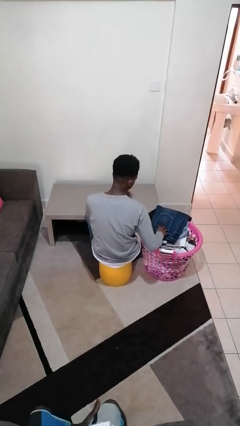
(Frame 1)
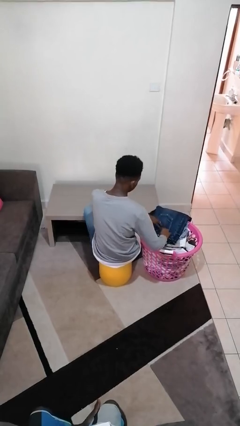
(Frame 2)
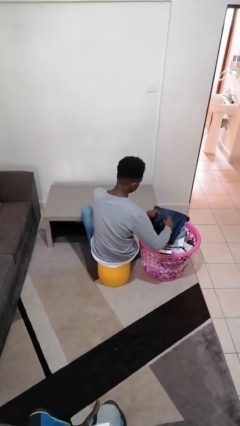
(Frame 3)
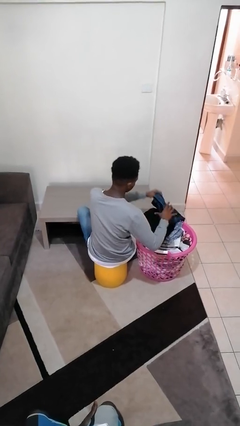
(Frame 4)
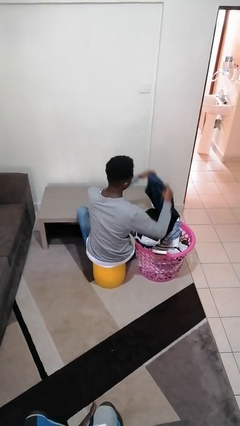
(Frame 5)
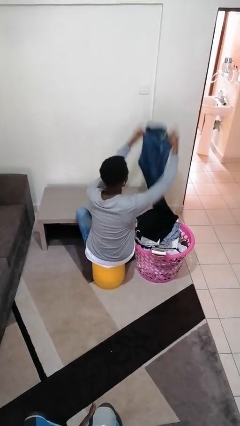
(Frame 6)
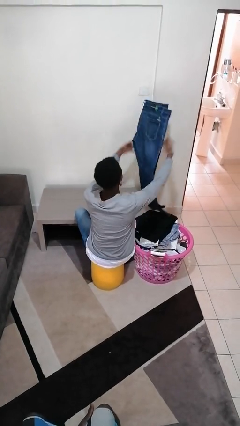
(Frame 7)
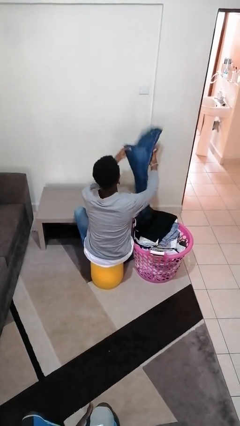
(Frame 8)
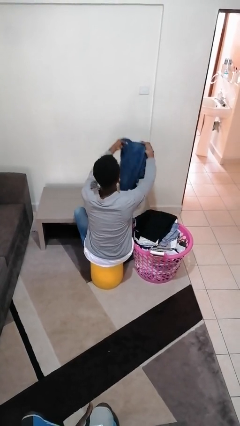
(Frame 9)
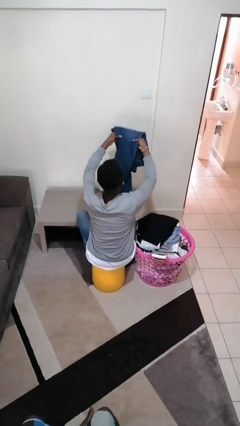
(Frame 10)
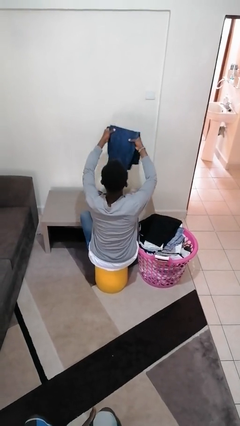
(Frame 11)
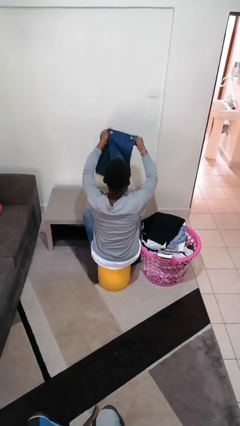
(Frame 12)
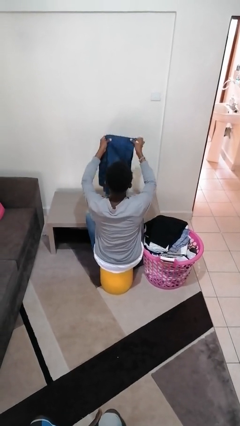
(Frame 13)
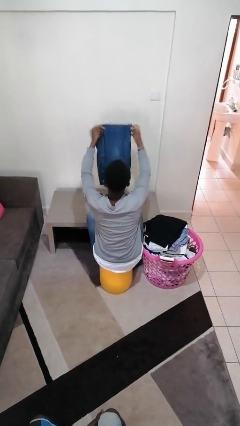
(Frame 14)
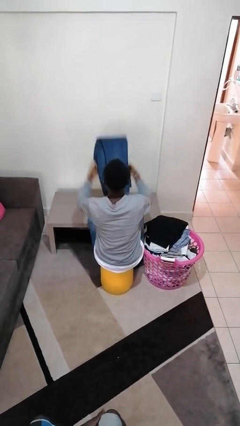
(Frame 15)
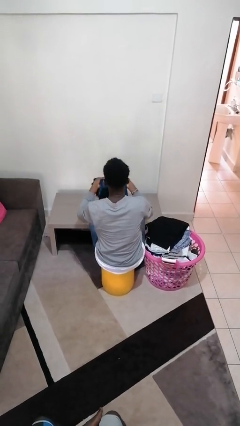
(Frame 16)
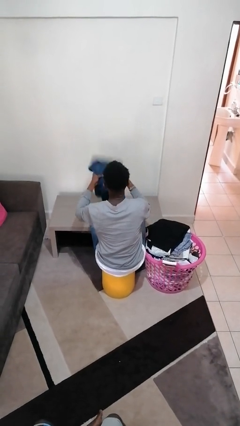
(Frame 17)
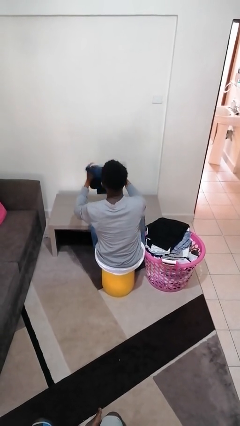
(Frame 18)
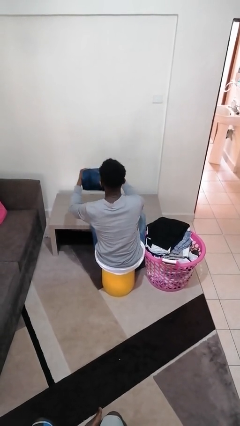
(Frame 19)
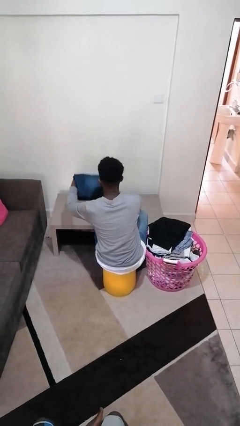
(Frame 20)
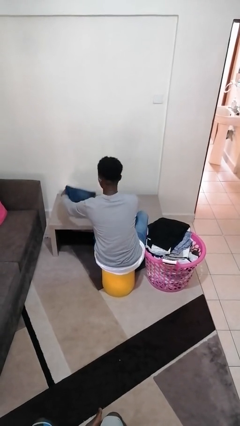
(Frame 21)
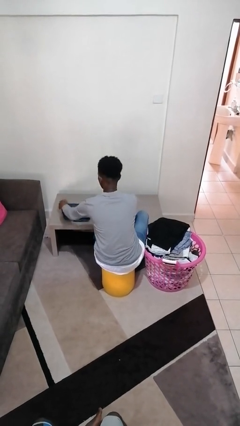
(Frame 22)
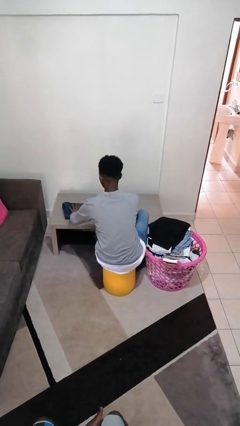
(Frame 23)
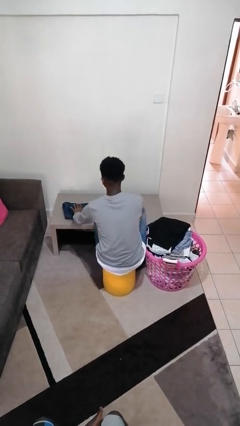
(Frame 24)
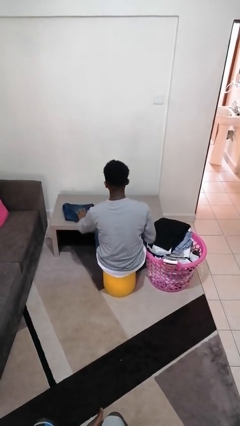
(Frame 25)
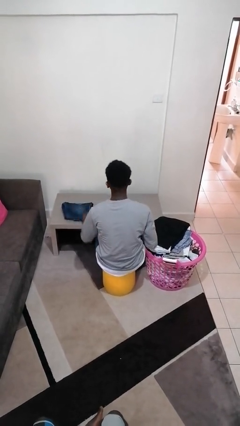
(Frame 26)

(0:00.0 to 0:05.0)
person folds pants

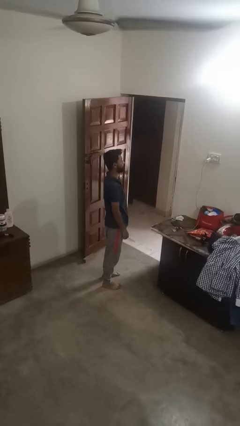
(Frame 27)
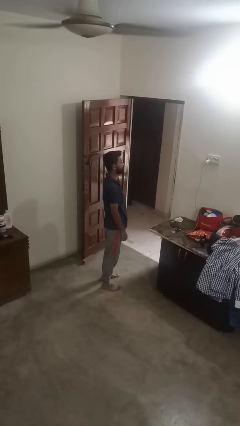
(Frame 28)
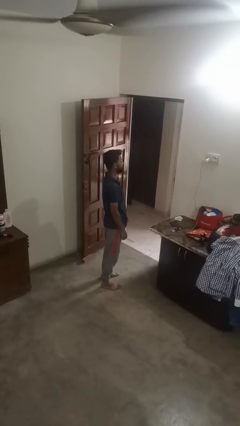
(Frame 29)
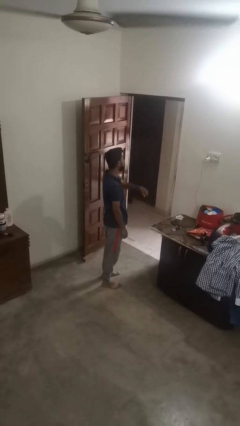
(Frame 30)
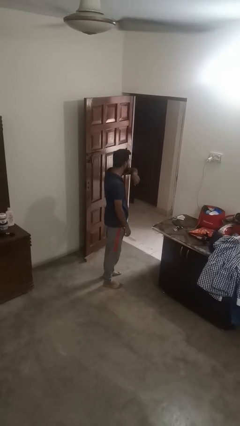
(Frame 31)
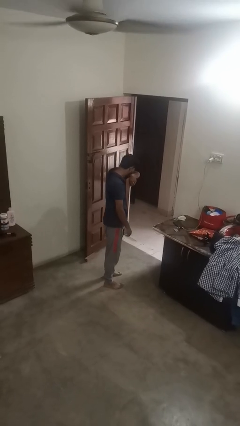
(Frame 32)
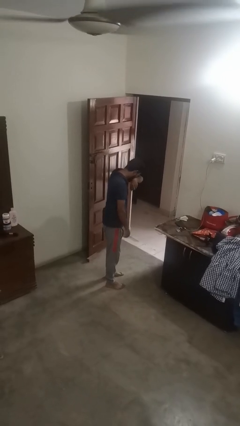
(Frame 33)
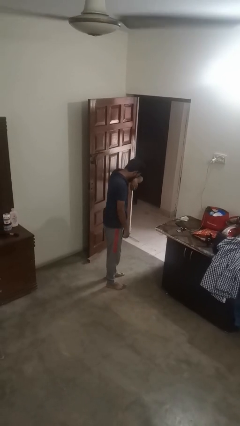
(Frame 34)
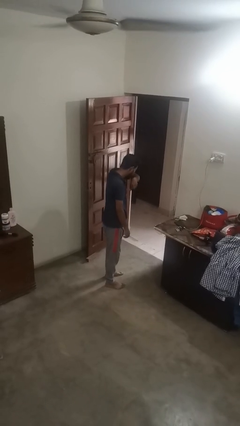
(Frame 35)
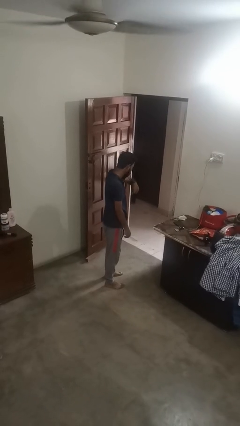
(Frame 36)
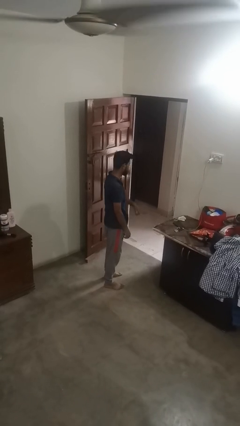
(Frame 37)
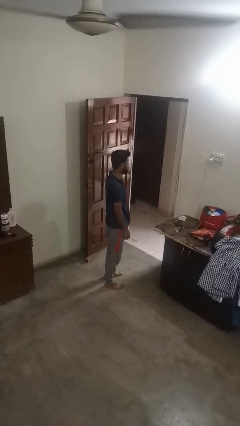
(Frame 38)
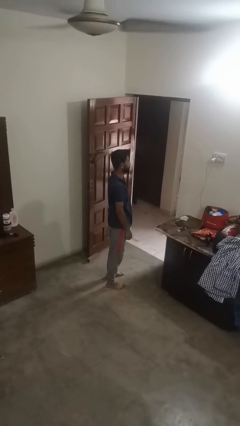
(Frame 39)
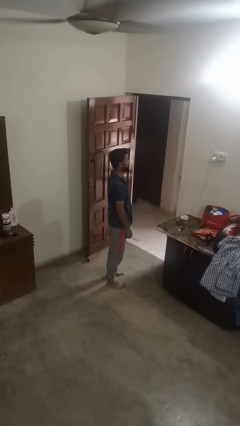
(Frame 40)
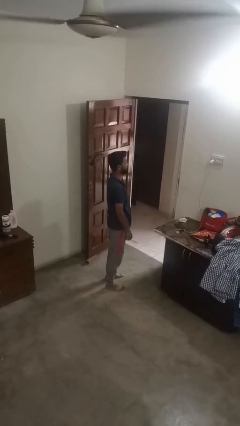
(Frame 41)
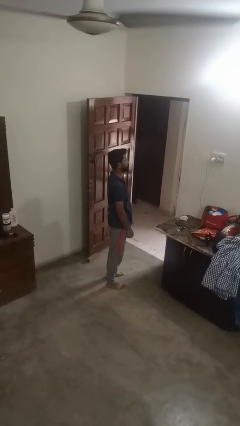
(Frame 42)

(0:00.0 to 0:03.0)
person sneezes into arm

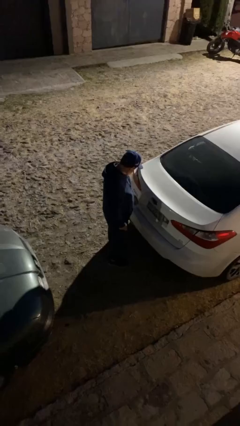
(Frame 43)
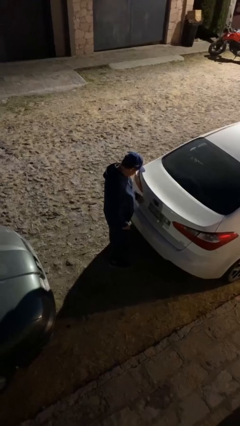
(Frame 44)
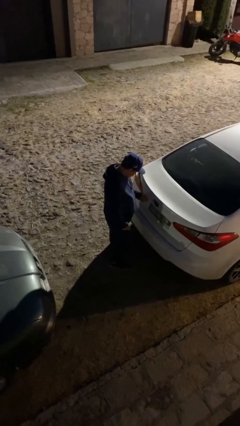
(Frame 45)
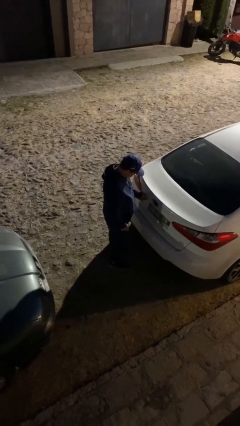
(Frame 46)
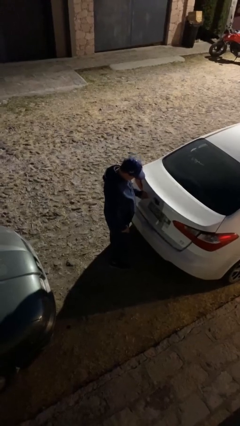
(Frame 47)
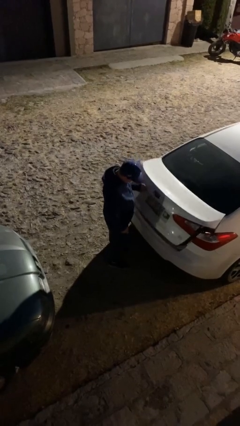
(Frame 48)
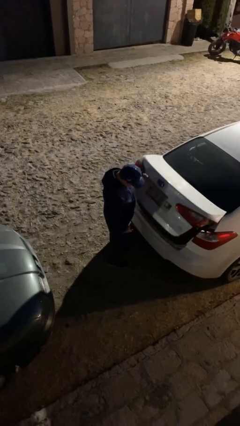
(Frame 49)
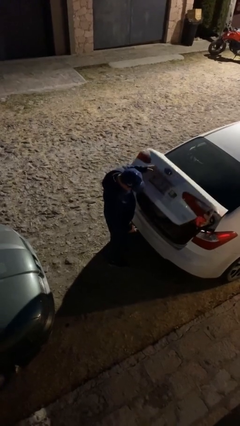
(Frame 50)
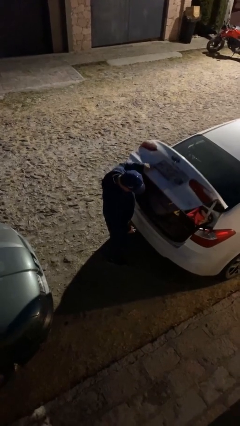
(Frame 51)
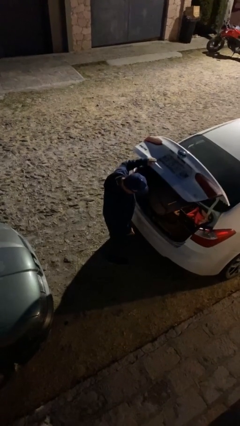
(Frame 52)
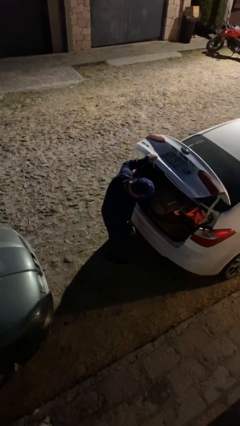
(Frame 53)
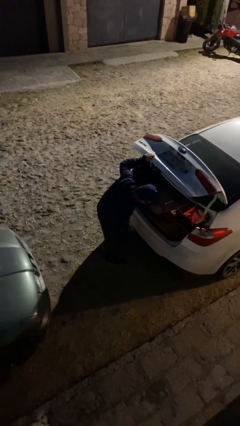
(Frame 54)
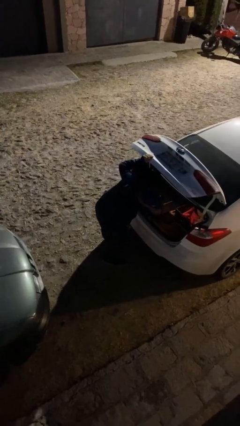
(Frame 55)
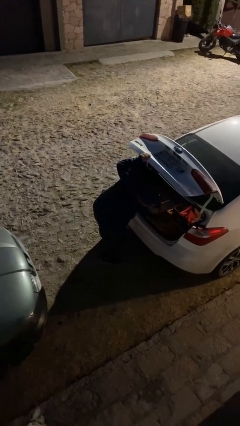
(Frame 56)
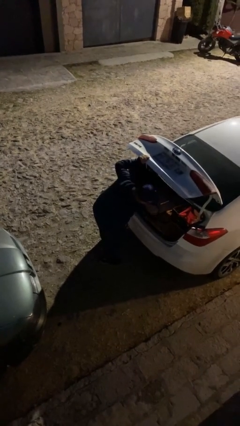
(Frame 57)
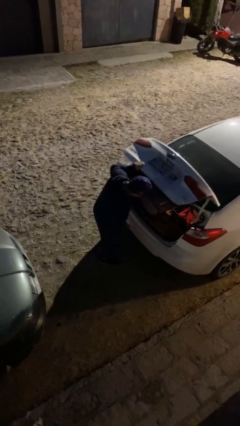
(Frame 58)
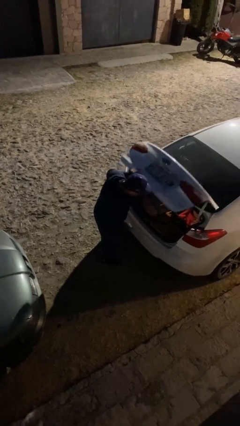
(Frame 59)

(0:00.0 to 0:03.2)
person opens car trunk

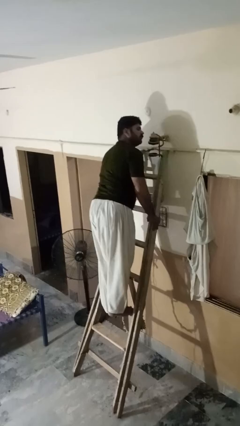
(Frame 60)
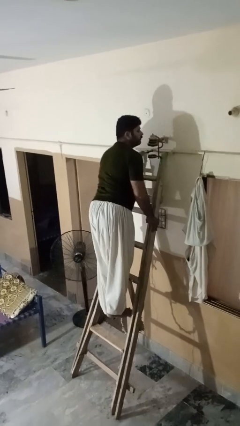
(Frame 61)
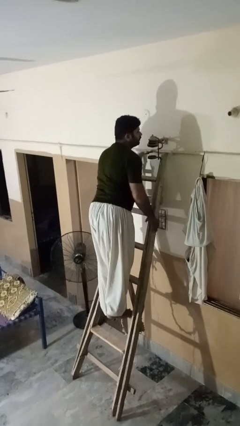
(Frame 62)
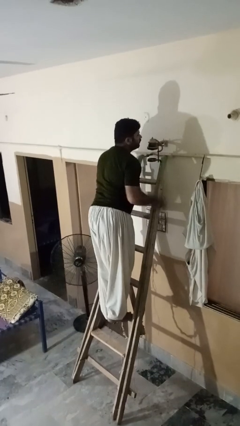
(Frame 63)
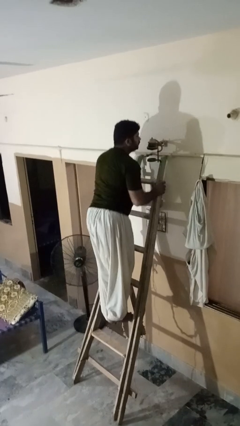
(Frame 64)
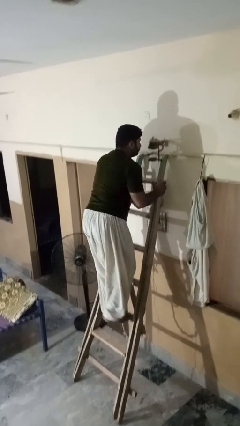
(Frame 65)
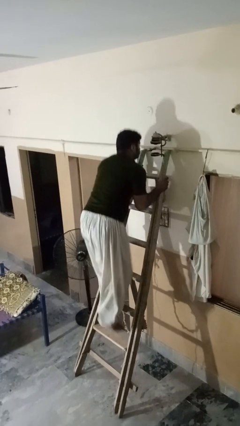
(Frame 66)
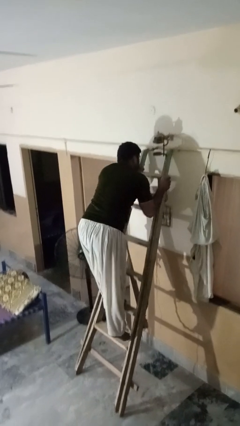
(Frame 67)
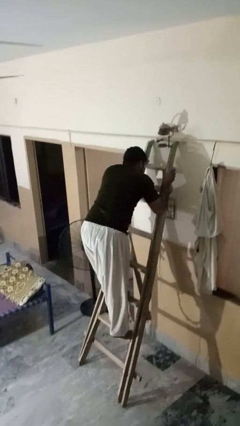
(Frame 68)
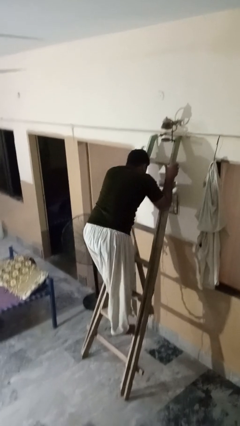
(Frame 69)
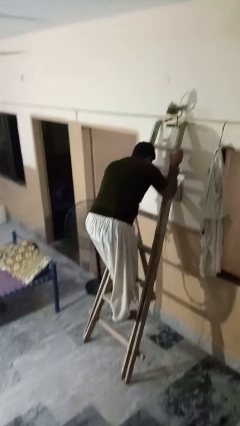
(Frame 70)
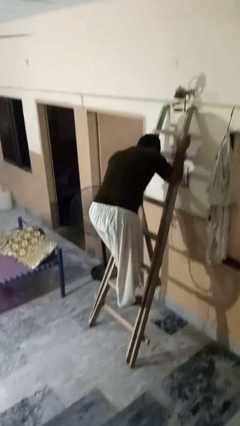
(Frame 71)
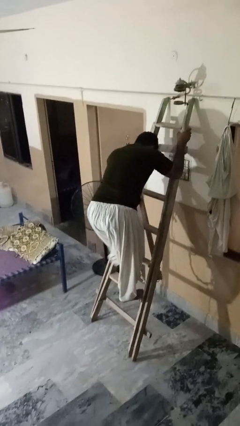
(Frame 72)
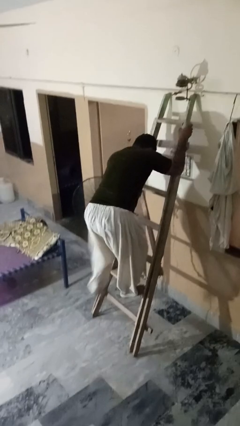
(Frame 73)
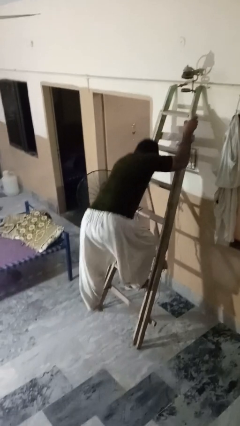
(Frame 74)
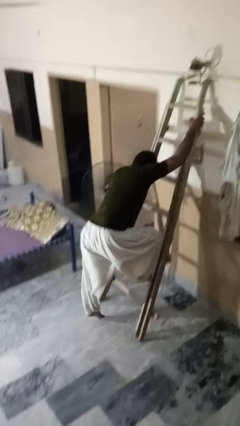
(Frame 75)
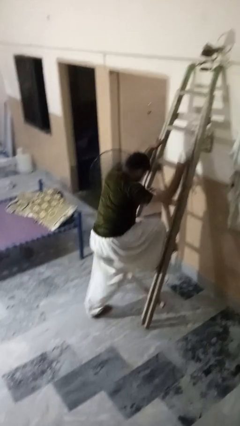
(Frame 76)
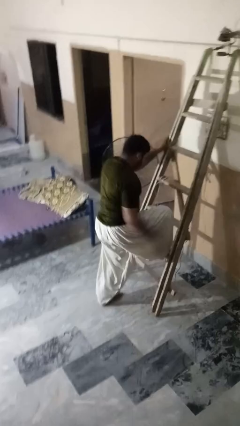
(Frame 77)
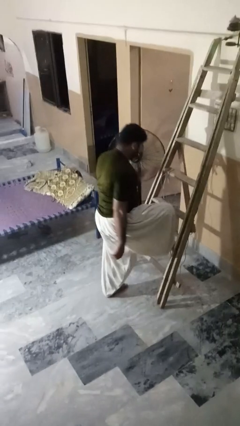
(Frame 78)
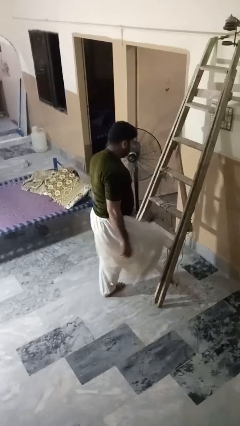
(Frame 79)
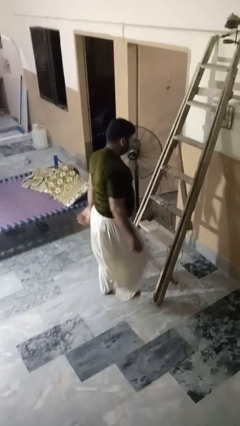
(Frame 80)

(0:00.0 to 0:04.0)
person climbs down ladder

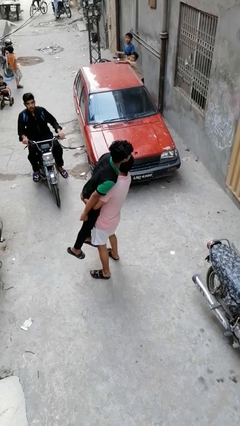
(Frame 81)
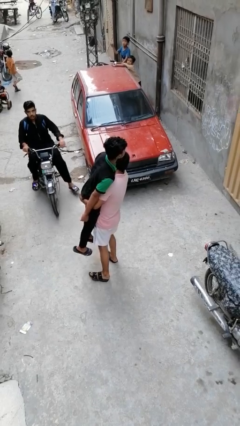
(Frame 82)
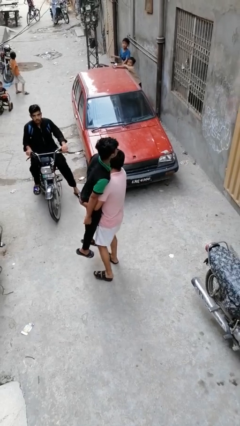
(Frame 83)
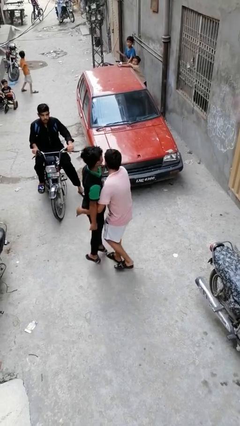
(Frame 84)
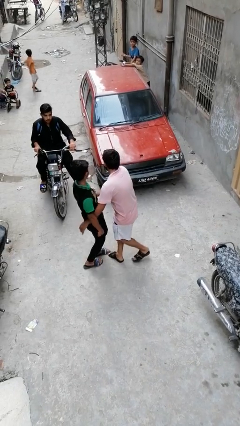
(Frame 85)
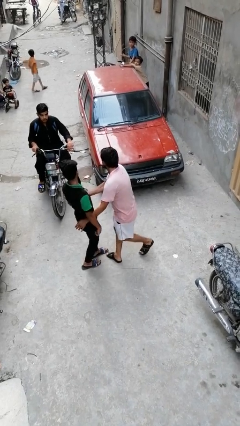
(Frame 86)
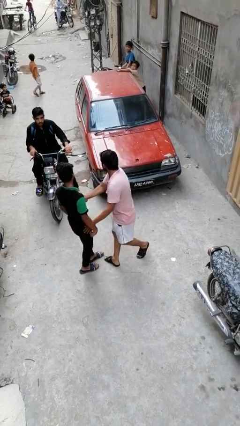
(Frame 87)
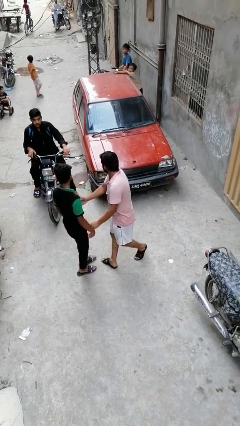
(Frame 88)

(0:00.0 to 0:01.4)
person puts down person

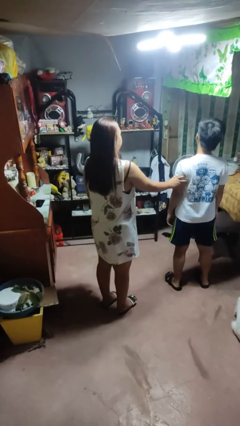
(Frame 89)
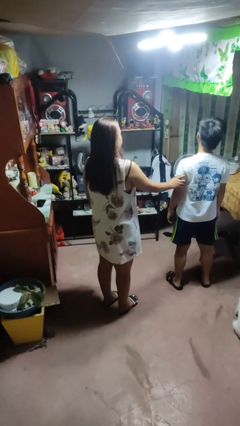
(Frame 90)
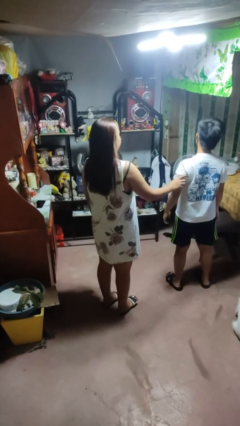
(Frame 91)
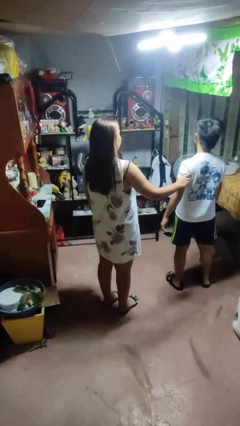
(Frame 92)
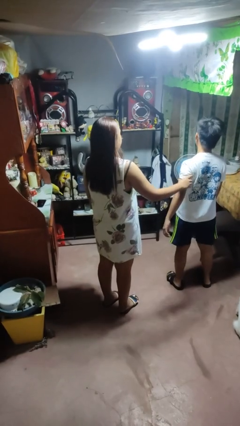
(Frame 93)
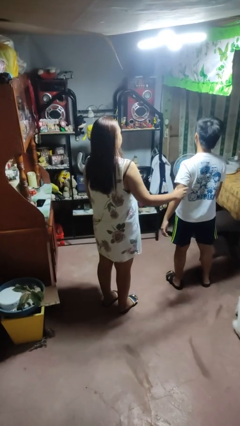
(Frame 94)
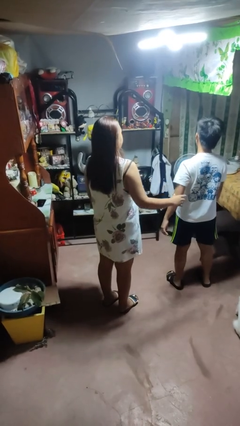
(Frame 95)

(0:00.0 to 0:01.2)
person grabs person by bicep
